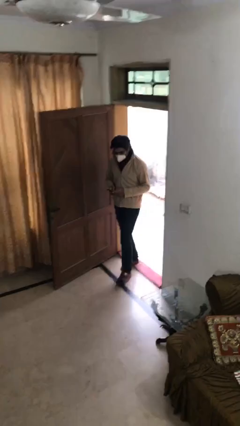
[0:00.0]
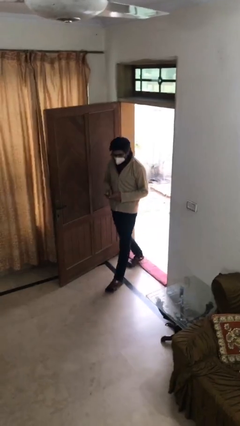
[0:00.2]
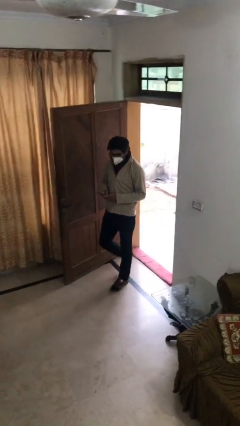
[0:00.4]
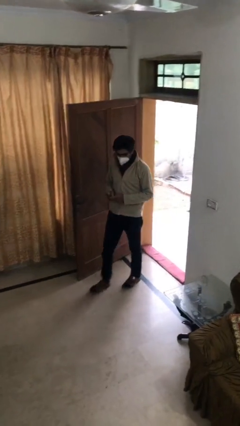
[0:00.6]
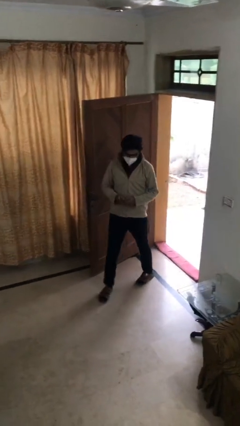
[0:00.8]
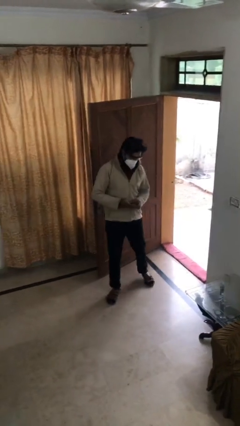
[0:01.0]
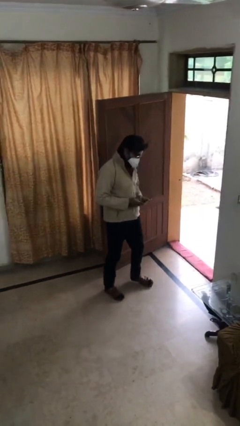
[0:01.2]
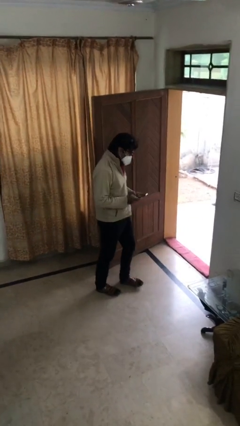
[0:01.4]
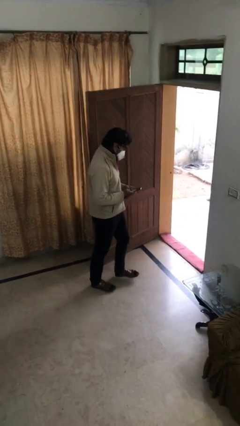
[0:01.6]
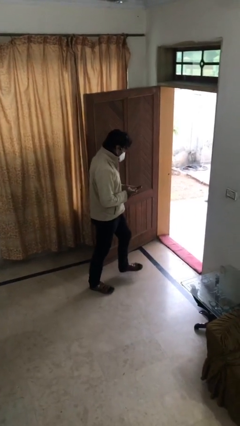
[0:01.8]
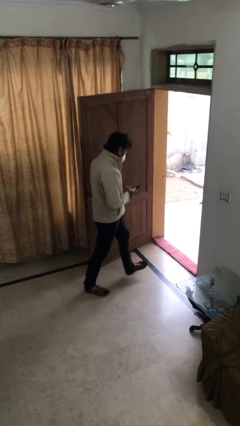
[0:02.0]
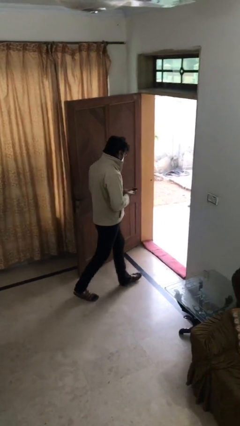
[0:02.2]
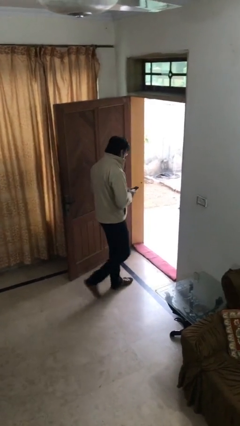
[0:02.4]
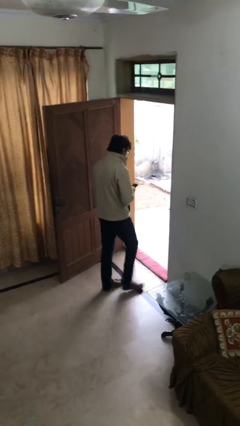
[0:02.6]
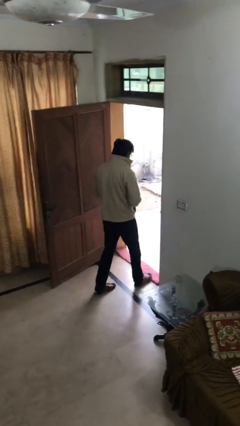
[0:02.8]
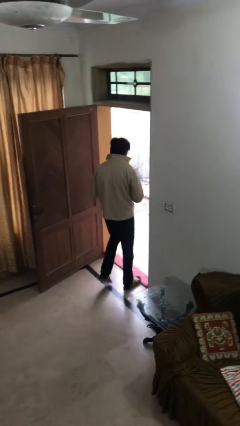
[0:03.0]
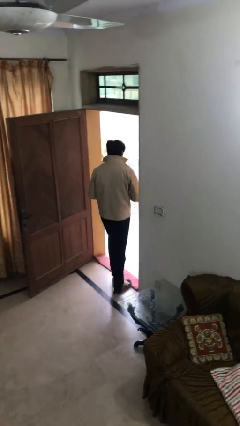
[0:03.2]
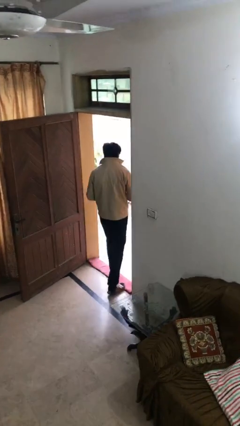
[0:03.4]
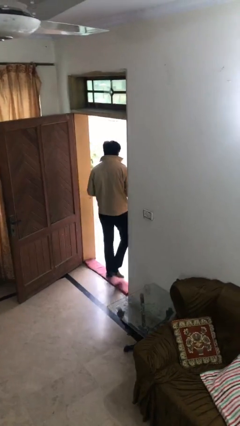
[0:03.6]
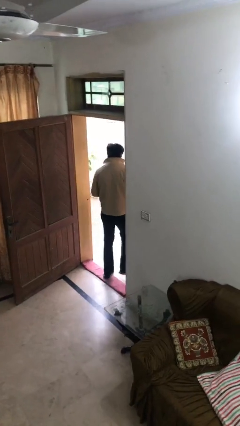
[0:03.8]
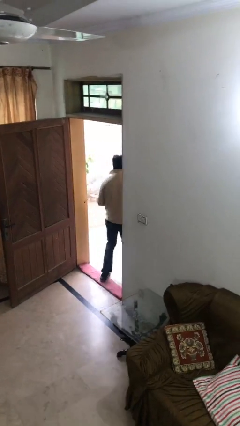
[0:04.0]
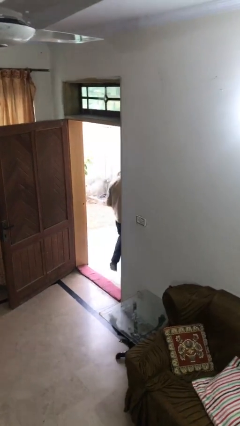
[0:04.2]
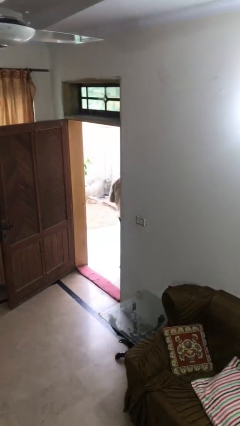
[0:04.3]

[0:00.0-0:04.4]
person exits scene through structure

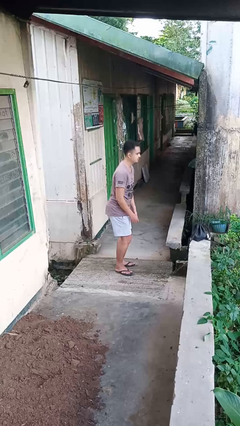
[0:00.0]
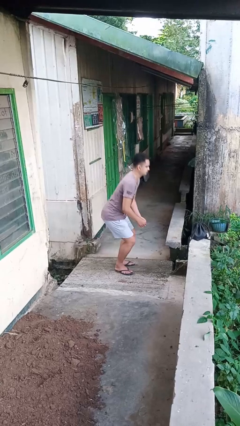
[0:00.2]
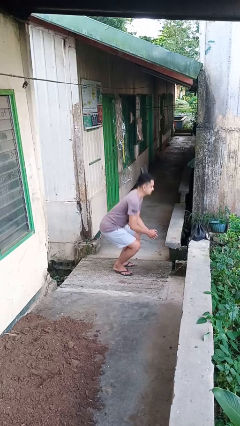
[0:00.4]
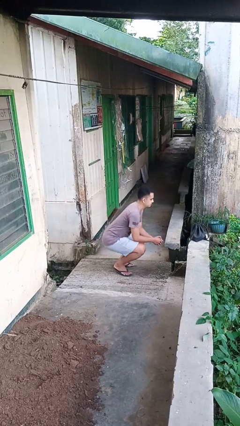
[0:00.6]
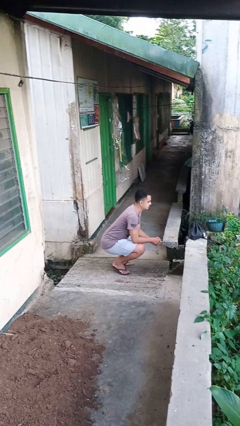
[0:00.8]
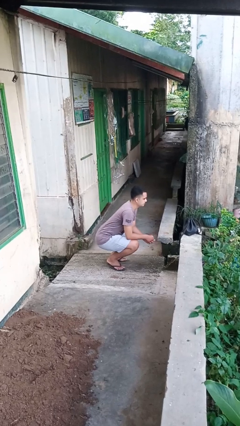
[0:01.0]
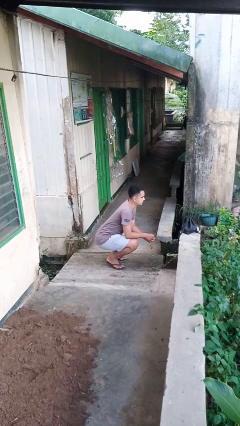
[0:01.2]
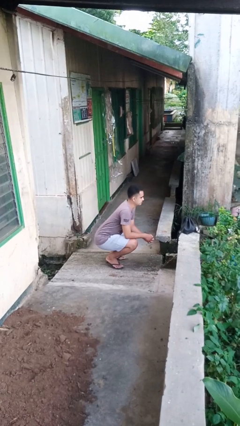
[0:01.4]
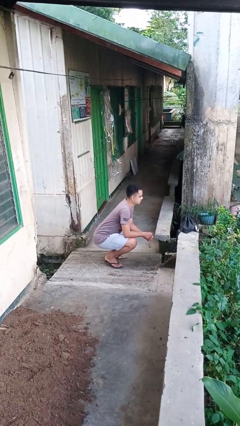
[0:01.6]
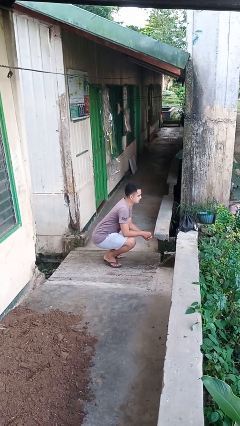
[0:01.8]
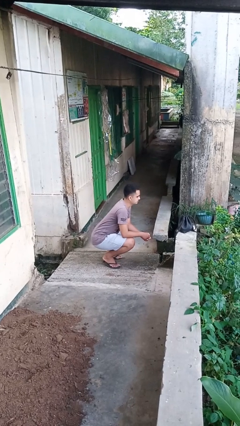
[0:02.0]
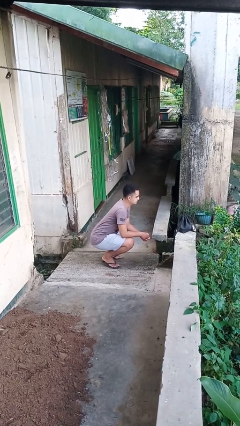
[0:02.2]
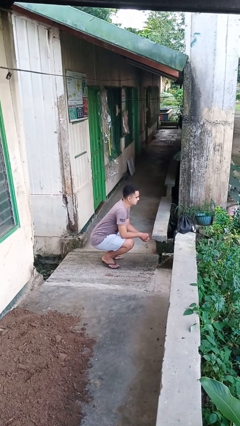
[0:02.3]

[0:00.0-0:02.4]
person squats

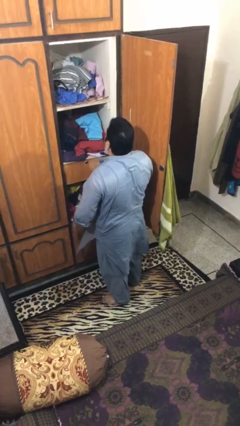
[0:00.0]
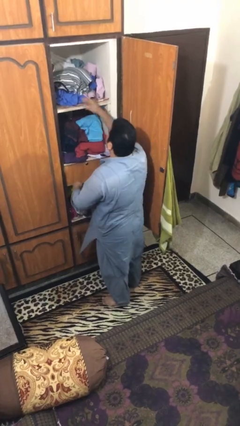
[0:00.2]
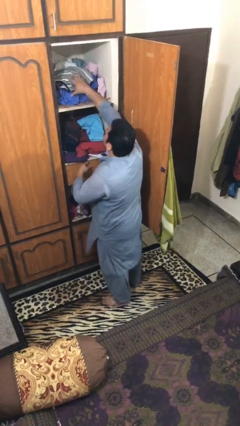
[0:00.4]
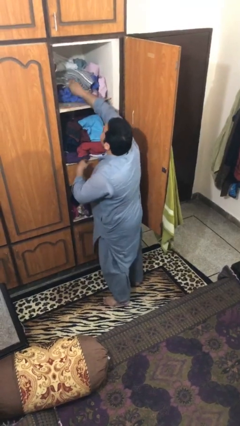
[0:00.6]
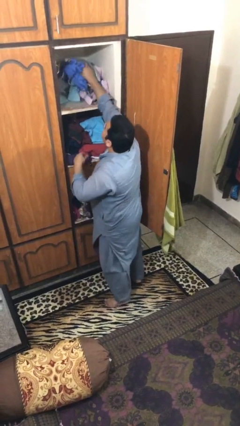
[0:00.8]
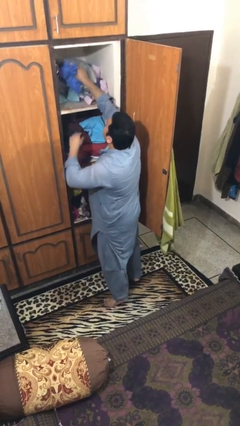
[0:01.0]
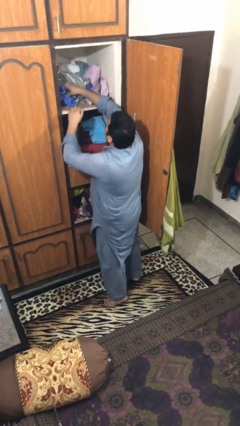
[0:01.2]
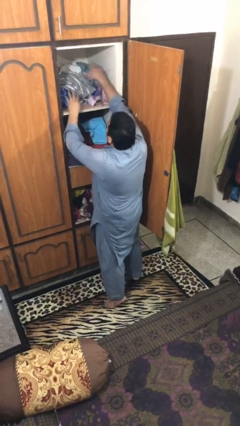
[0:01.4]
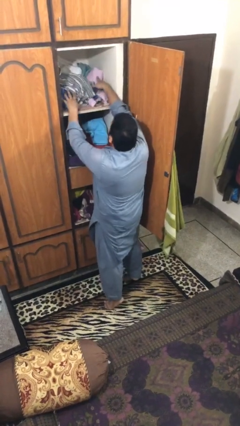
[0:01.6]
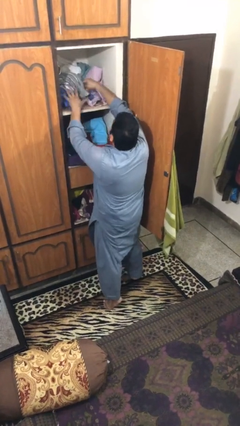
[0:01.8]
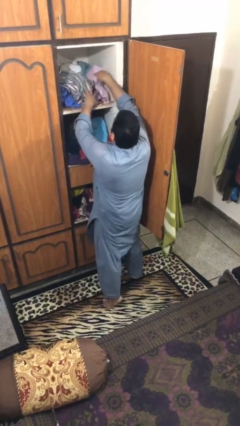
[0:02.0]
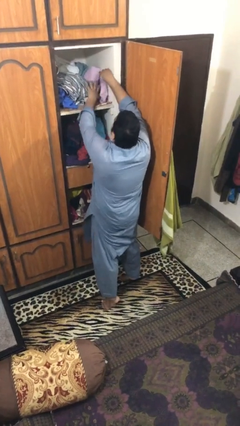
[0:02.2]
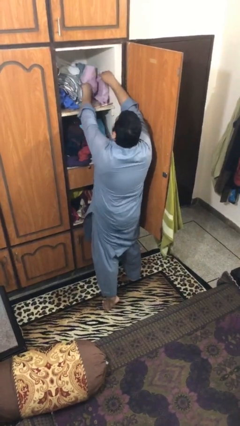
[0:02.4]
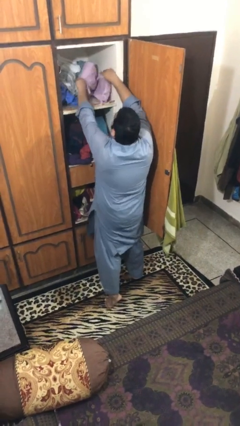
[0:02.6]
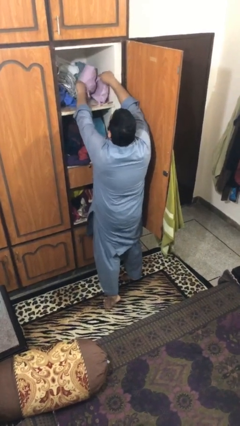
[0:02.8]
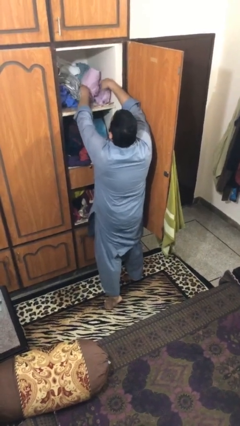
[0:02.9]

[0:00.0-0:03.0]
person searches in cabinet

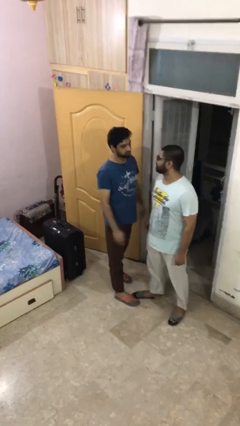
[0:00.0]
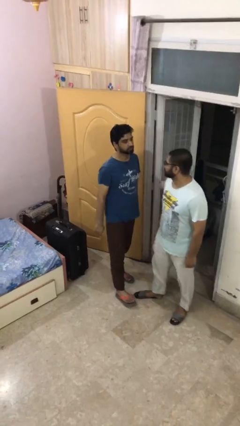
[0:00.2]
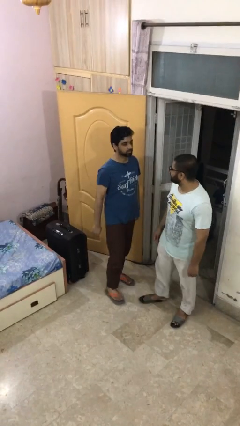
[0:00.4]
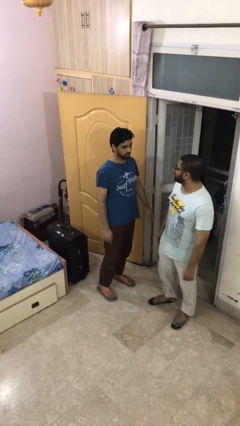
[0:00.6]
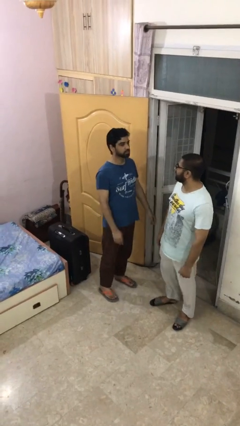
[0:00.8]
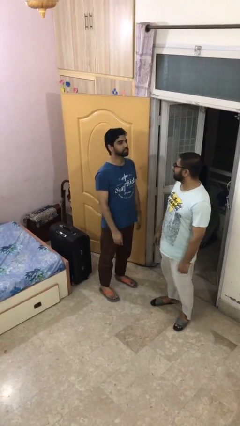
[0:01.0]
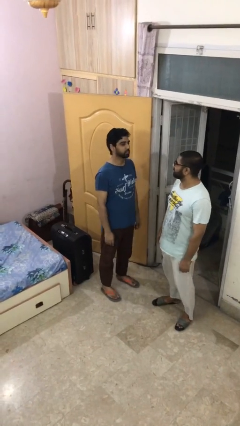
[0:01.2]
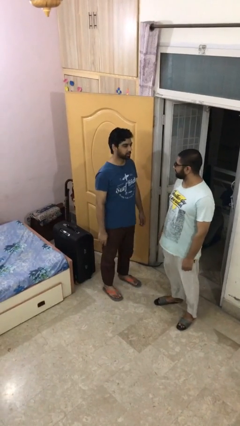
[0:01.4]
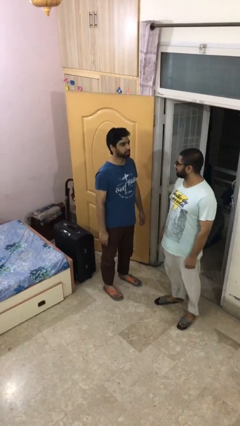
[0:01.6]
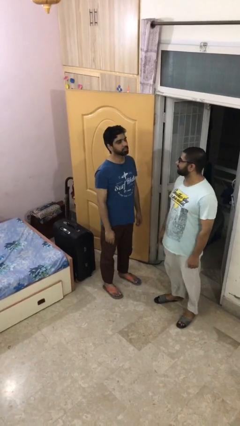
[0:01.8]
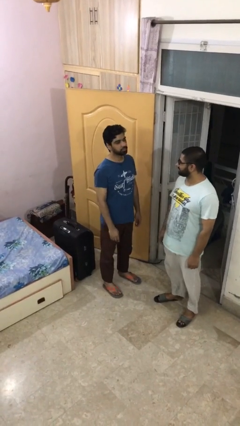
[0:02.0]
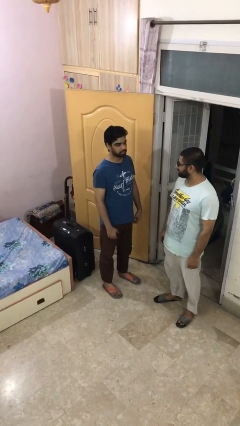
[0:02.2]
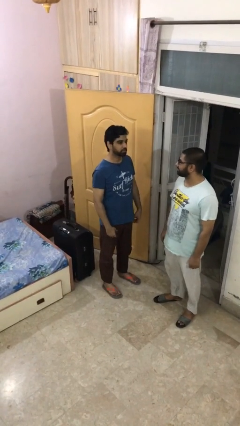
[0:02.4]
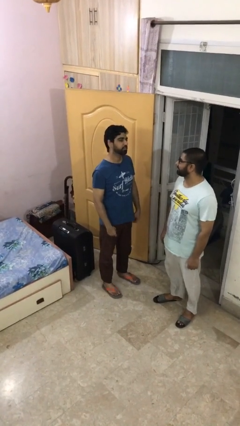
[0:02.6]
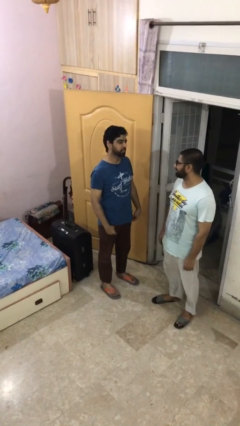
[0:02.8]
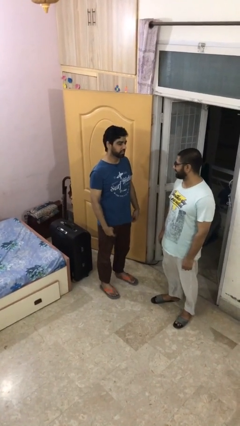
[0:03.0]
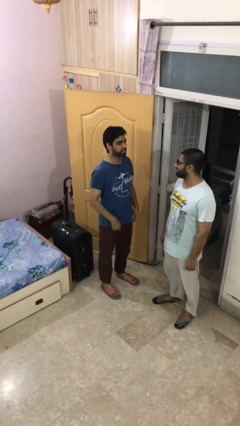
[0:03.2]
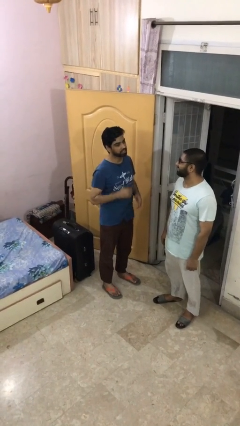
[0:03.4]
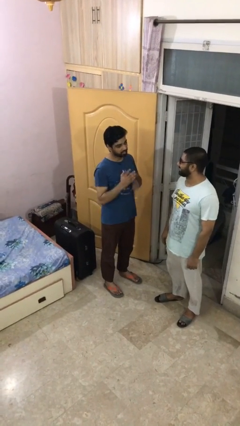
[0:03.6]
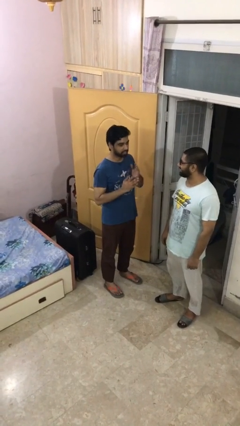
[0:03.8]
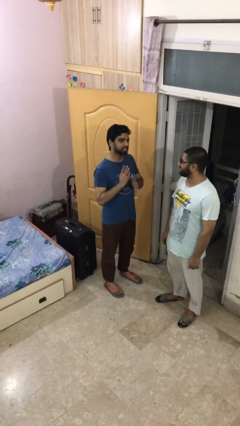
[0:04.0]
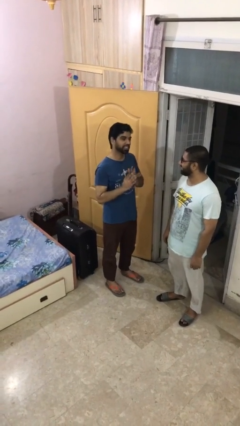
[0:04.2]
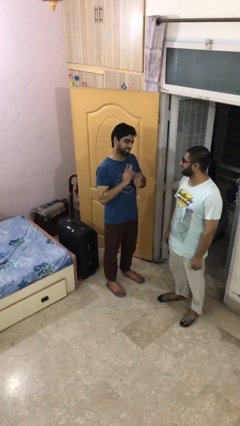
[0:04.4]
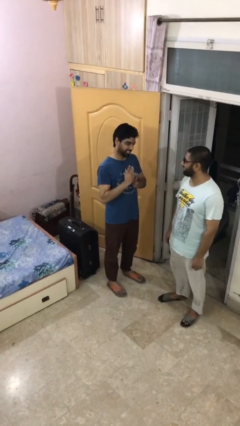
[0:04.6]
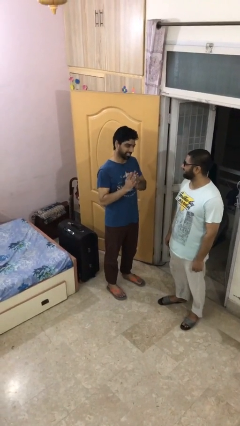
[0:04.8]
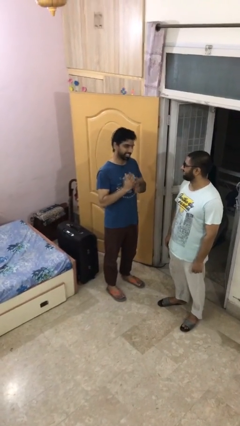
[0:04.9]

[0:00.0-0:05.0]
person talks to person

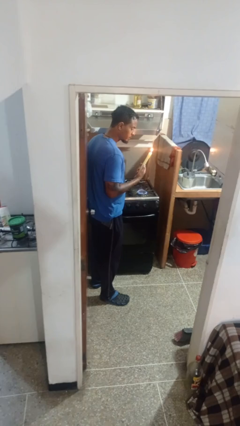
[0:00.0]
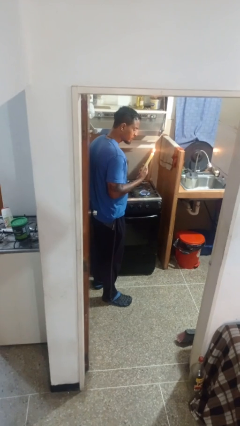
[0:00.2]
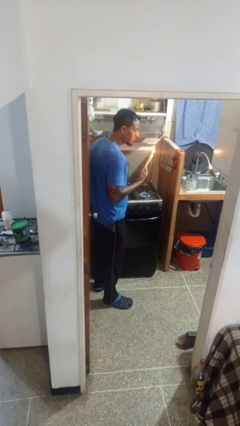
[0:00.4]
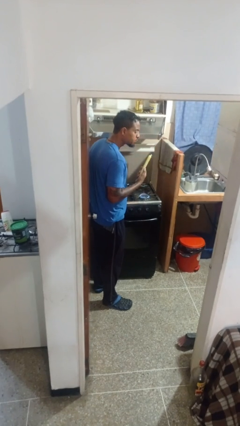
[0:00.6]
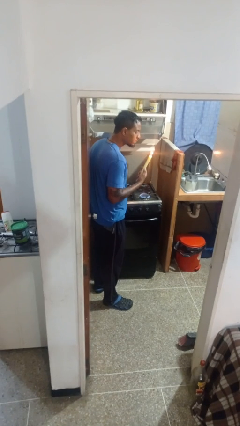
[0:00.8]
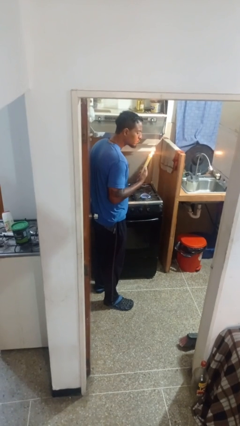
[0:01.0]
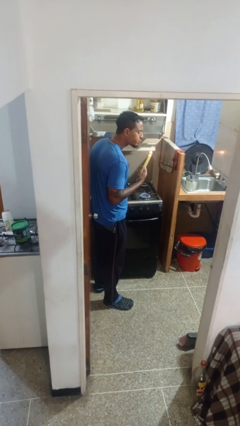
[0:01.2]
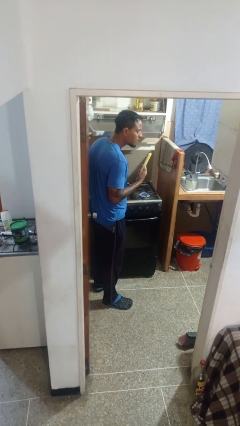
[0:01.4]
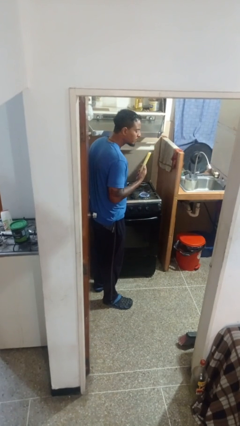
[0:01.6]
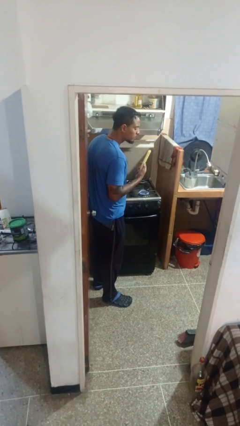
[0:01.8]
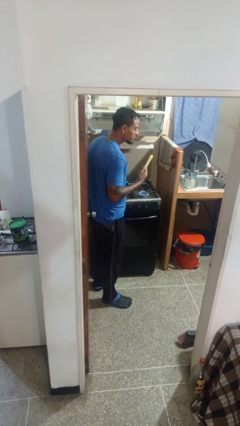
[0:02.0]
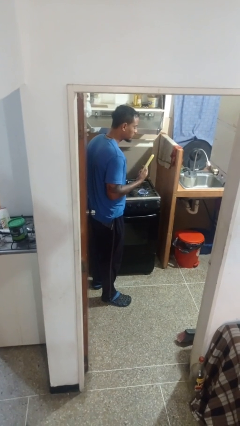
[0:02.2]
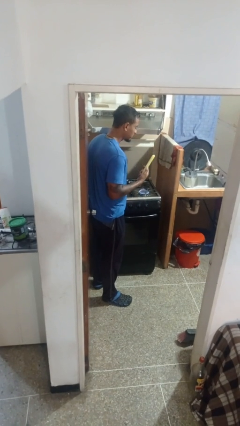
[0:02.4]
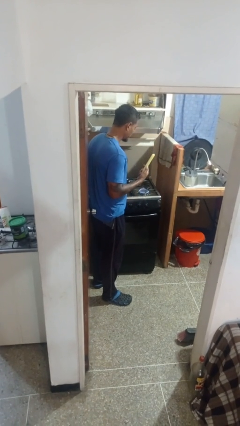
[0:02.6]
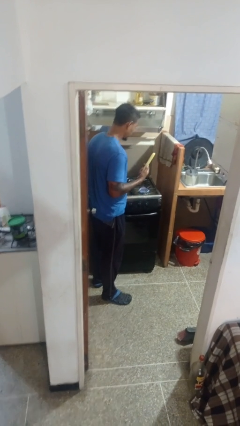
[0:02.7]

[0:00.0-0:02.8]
person extinguishes candle

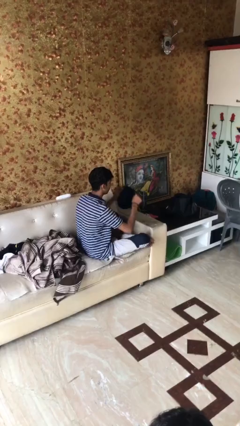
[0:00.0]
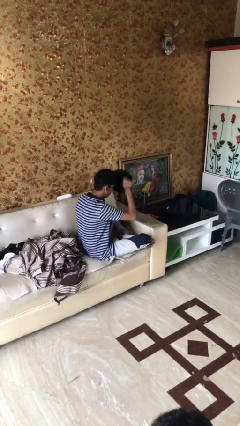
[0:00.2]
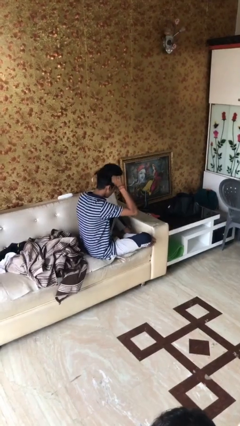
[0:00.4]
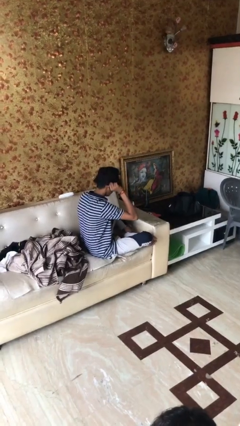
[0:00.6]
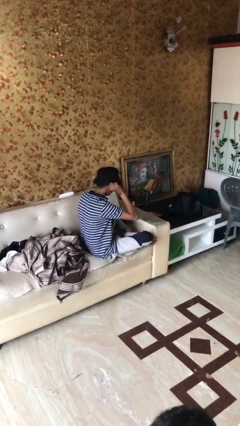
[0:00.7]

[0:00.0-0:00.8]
person puts on hat
